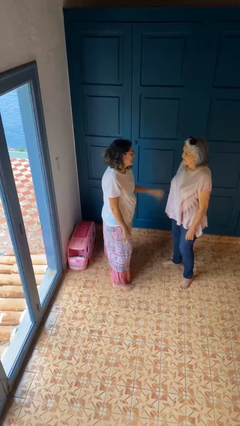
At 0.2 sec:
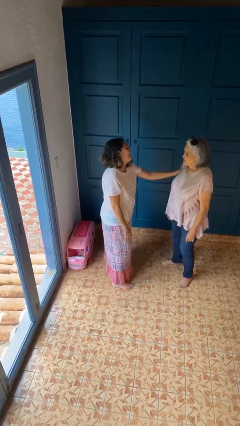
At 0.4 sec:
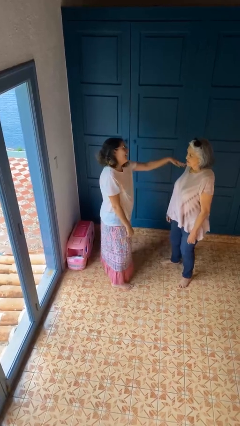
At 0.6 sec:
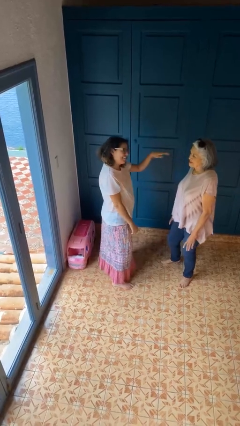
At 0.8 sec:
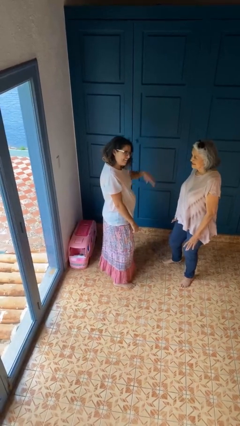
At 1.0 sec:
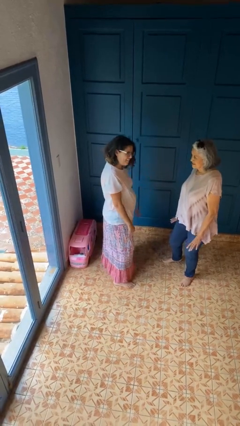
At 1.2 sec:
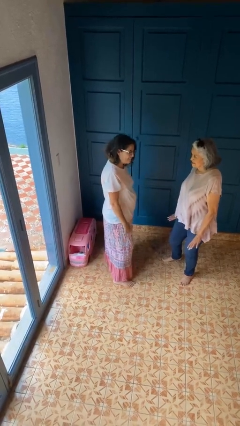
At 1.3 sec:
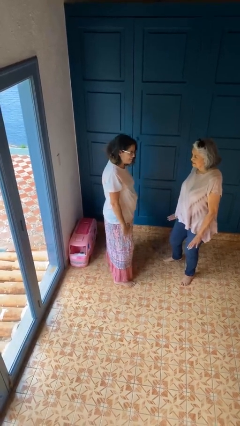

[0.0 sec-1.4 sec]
person shoves person

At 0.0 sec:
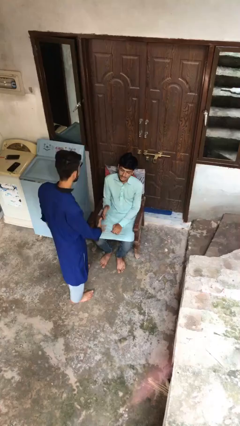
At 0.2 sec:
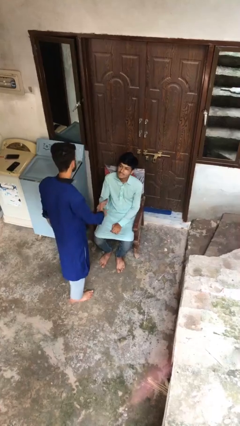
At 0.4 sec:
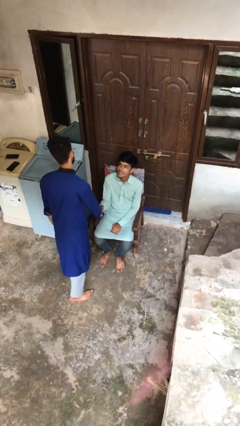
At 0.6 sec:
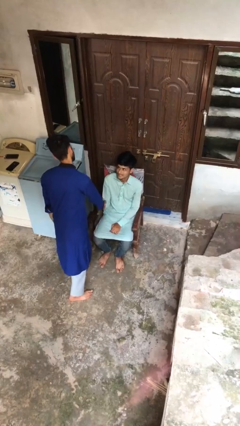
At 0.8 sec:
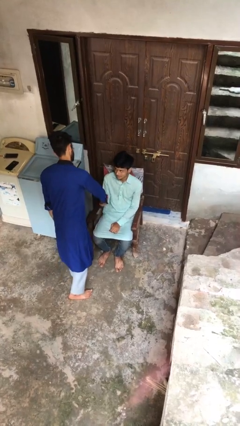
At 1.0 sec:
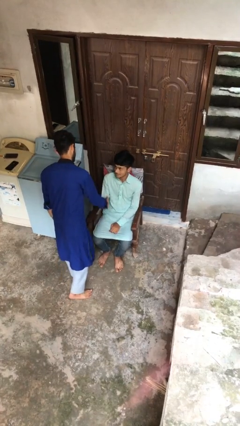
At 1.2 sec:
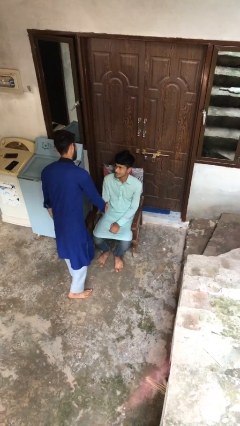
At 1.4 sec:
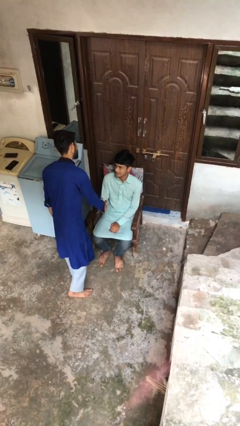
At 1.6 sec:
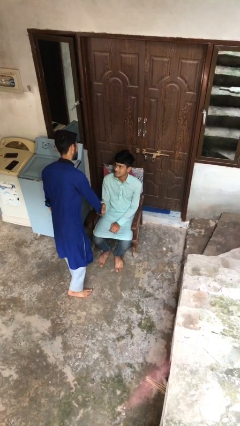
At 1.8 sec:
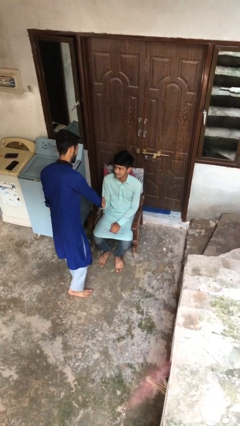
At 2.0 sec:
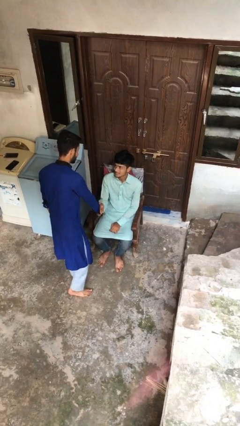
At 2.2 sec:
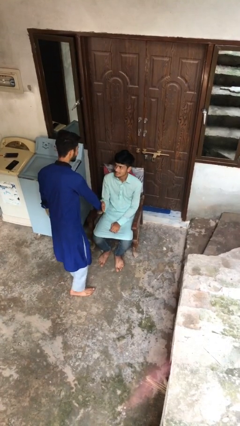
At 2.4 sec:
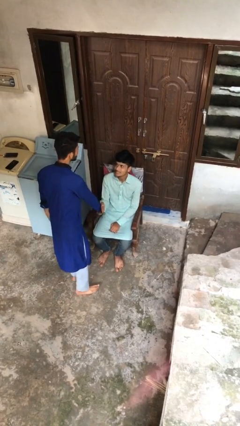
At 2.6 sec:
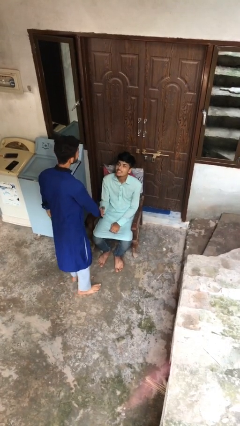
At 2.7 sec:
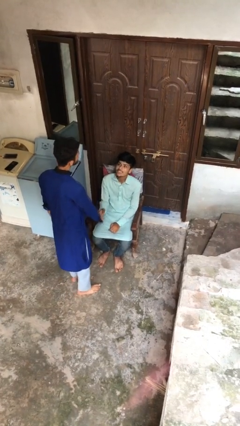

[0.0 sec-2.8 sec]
person shakes hand

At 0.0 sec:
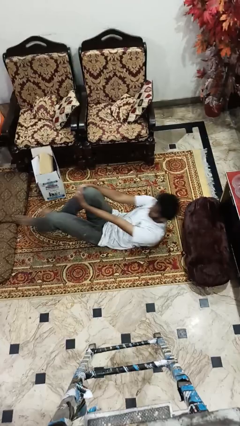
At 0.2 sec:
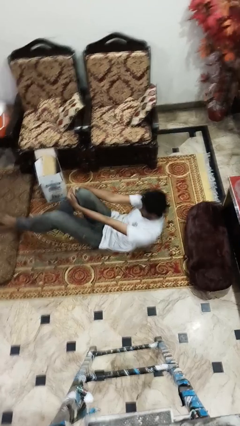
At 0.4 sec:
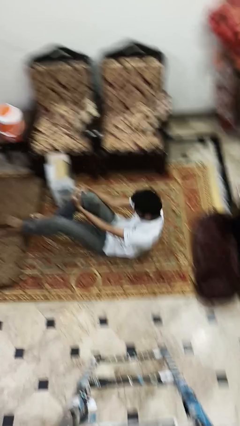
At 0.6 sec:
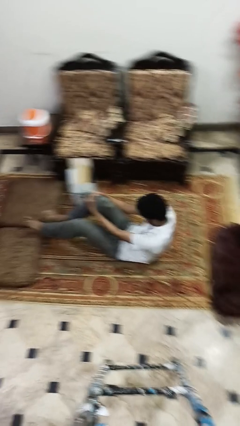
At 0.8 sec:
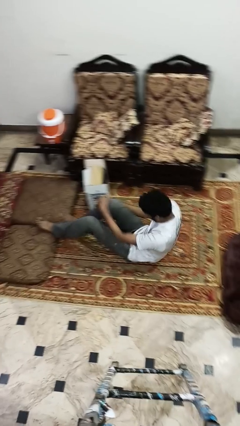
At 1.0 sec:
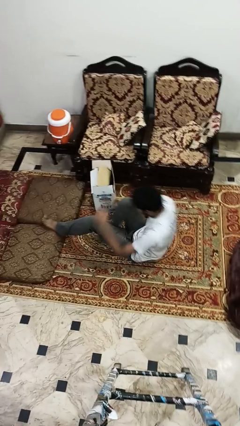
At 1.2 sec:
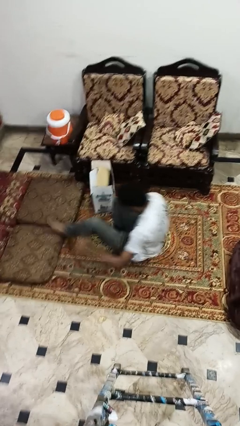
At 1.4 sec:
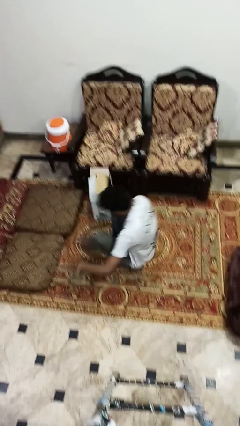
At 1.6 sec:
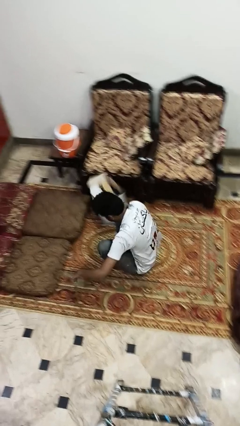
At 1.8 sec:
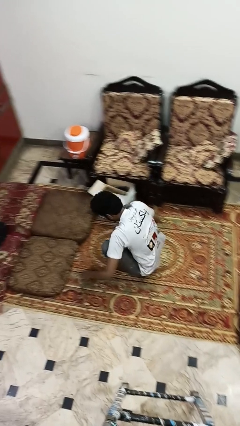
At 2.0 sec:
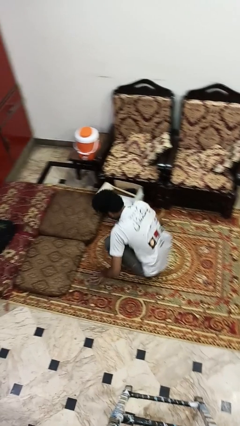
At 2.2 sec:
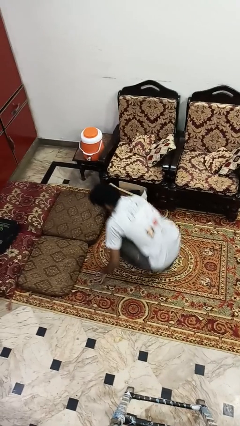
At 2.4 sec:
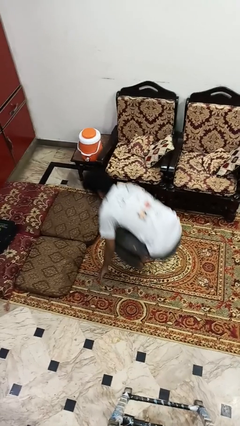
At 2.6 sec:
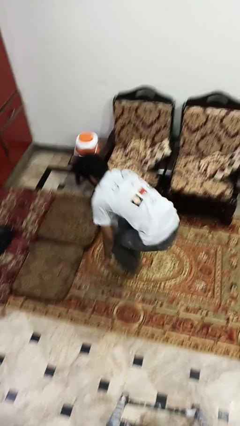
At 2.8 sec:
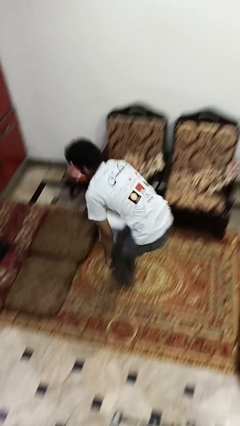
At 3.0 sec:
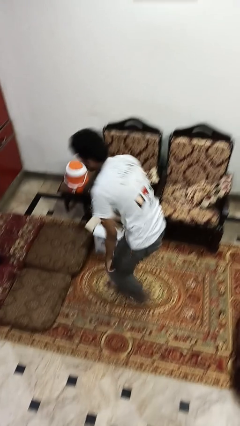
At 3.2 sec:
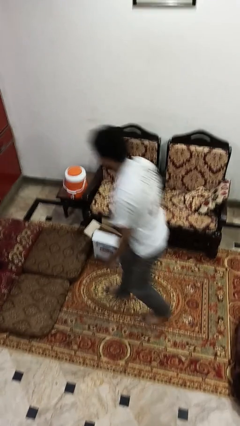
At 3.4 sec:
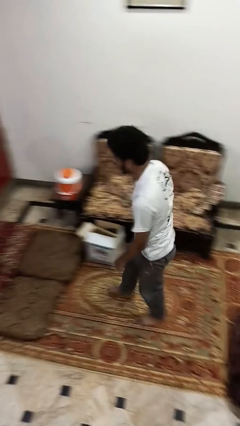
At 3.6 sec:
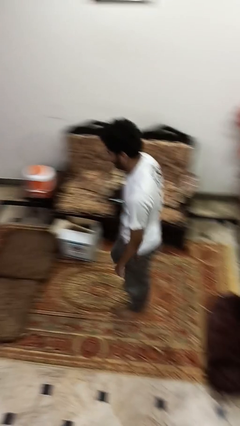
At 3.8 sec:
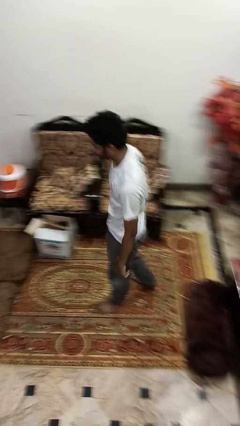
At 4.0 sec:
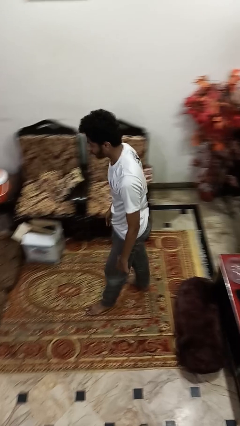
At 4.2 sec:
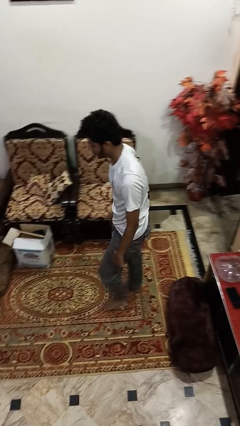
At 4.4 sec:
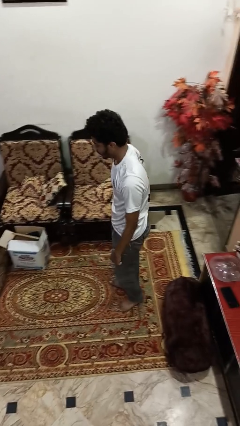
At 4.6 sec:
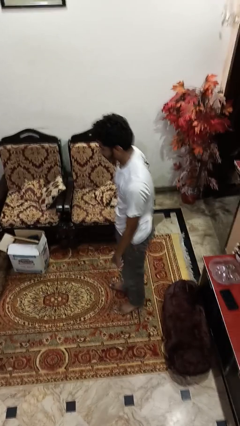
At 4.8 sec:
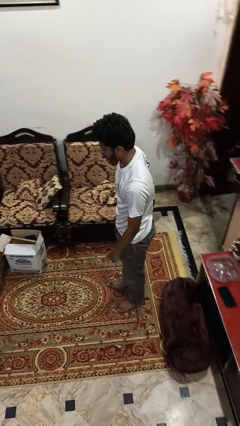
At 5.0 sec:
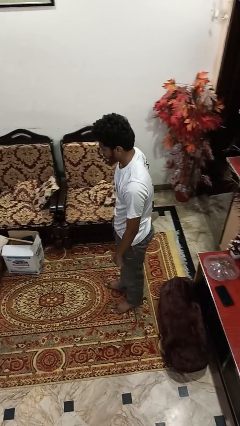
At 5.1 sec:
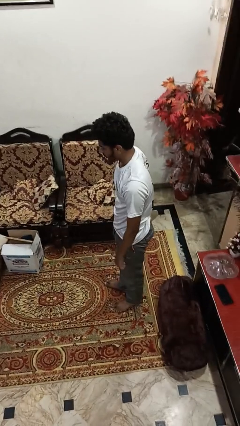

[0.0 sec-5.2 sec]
person stands up from floor

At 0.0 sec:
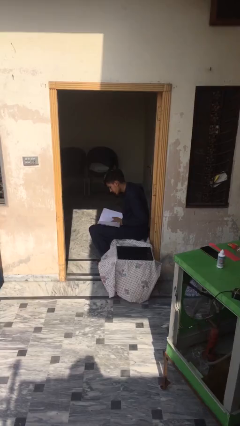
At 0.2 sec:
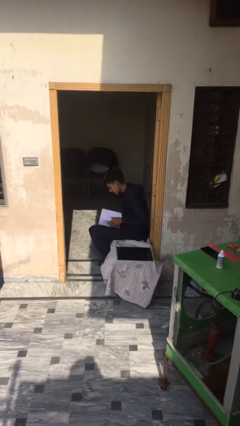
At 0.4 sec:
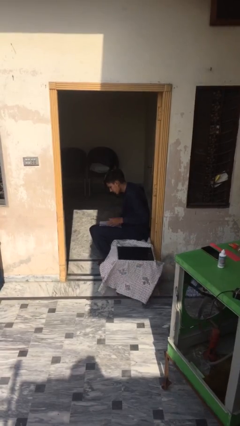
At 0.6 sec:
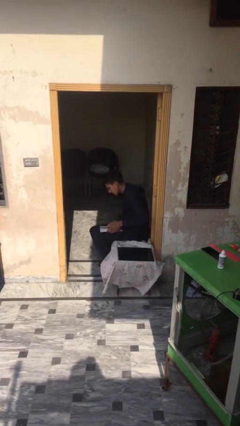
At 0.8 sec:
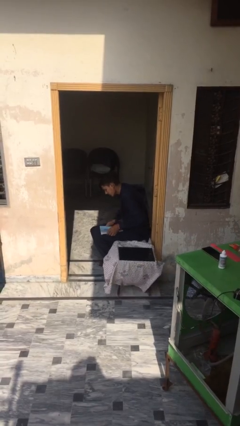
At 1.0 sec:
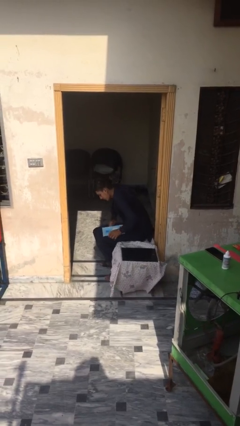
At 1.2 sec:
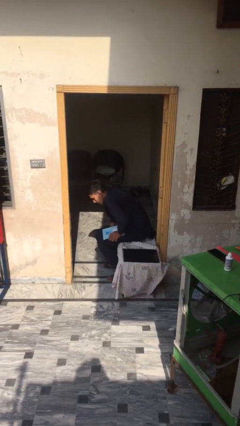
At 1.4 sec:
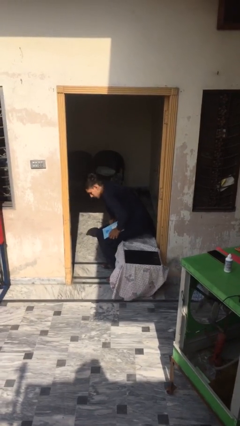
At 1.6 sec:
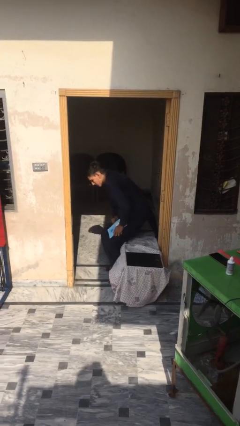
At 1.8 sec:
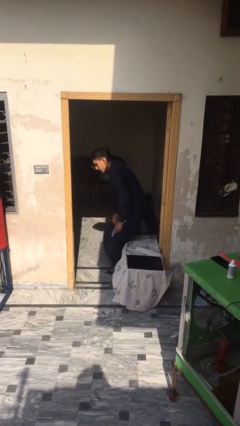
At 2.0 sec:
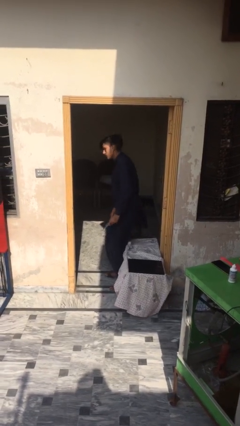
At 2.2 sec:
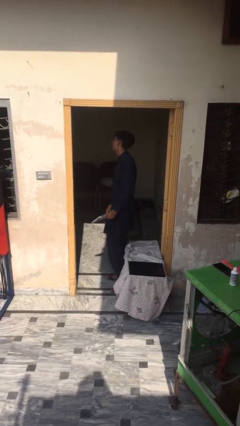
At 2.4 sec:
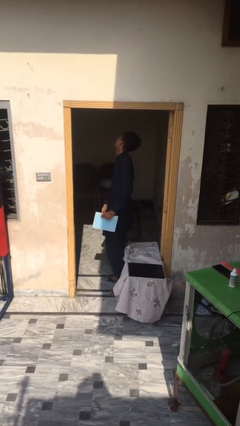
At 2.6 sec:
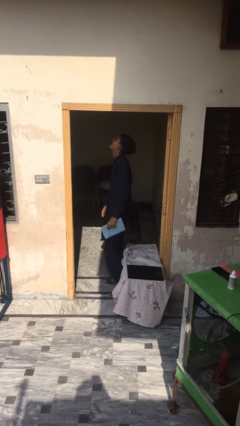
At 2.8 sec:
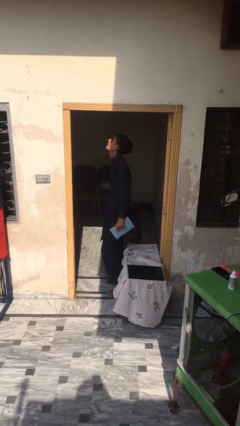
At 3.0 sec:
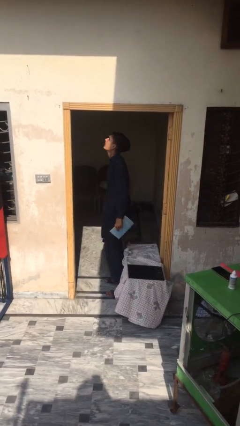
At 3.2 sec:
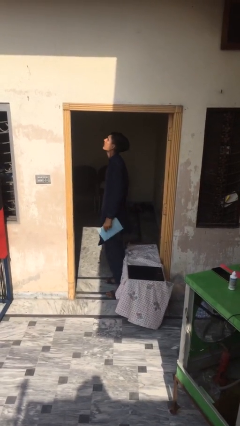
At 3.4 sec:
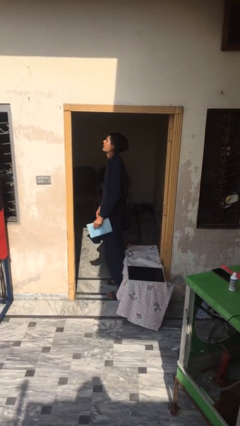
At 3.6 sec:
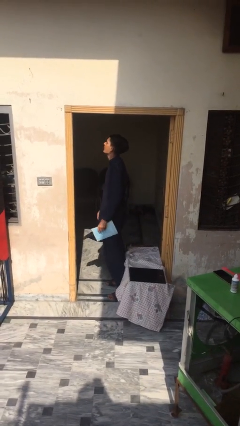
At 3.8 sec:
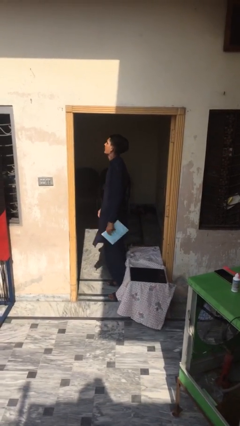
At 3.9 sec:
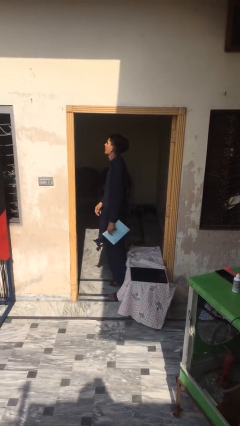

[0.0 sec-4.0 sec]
person stands up

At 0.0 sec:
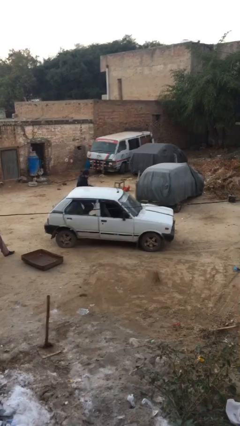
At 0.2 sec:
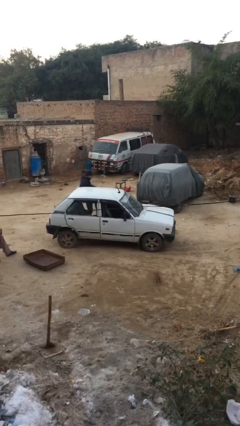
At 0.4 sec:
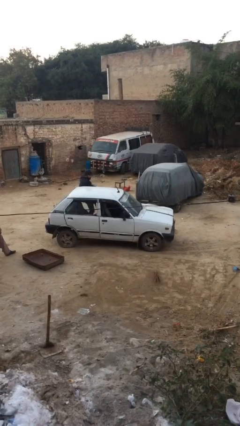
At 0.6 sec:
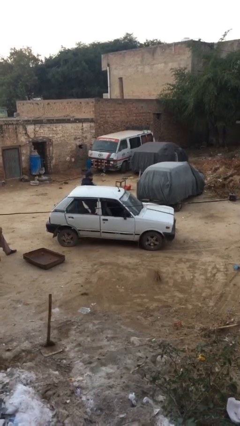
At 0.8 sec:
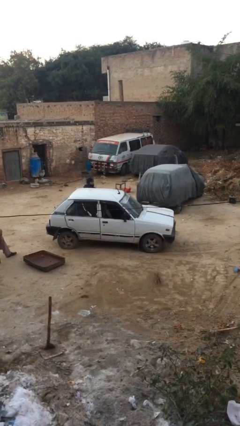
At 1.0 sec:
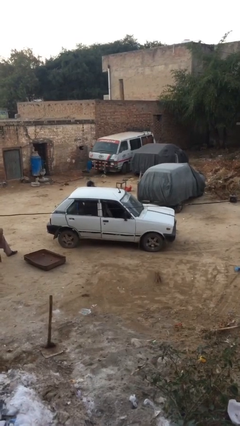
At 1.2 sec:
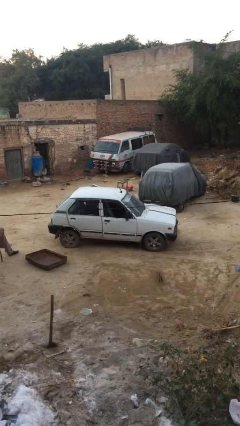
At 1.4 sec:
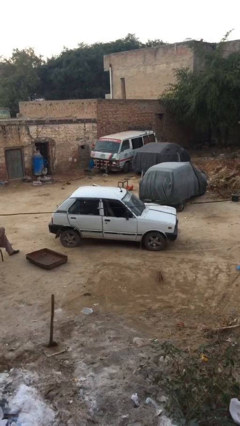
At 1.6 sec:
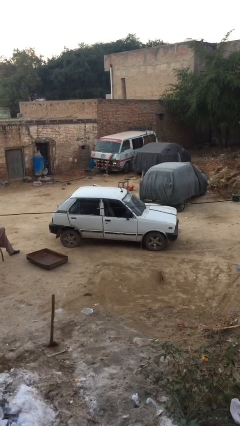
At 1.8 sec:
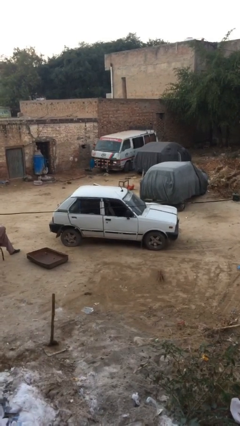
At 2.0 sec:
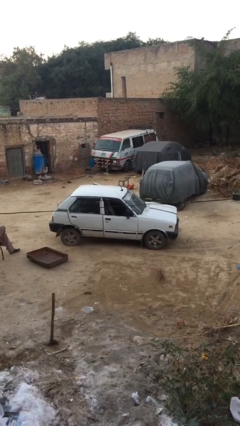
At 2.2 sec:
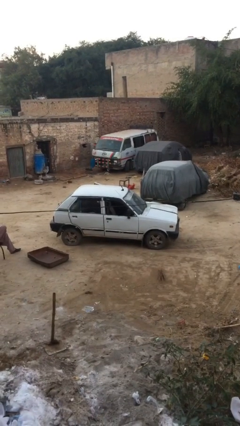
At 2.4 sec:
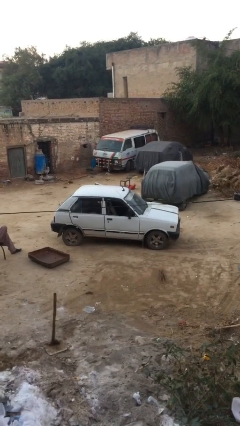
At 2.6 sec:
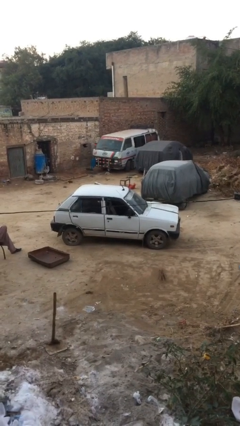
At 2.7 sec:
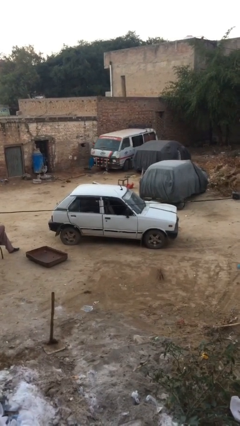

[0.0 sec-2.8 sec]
person enters car

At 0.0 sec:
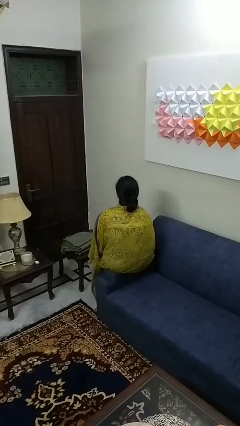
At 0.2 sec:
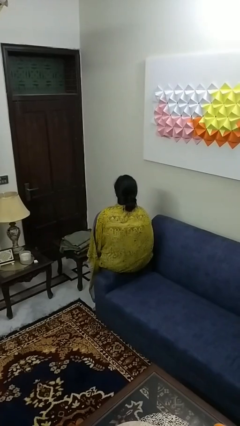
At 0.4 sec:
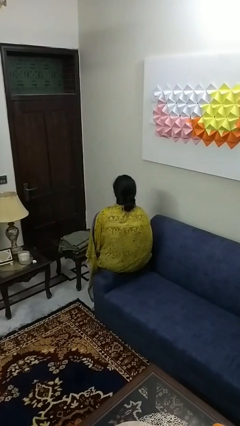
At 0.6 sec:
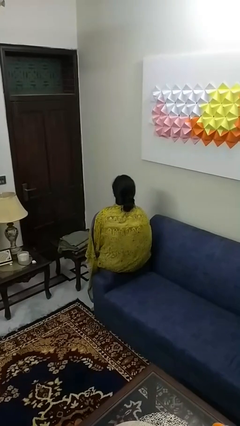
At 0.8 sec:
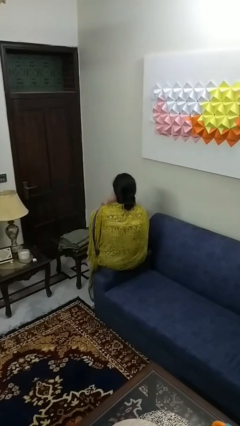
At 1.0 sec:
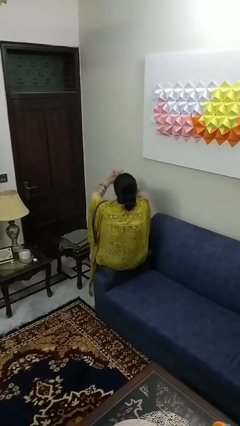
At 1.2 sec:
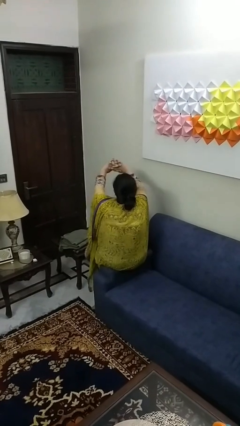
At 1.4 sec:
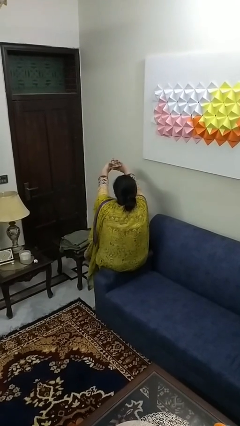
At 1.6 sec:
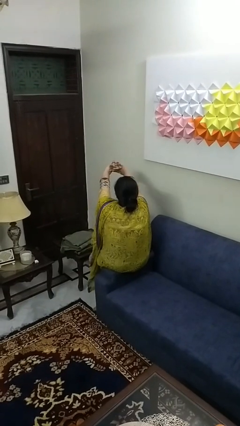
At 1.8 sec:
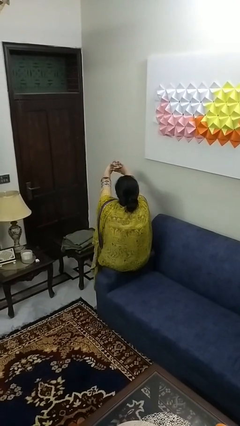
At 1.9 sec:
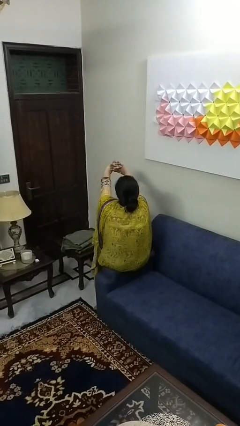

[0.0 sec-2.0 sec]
person cracks knuckles
